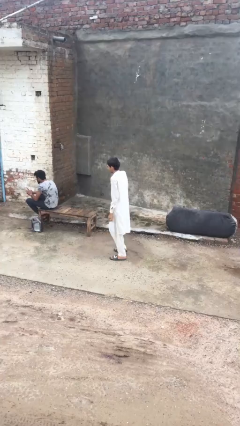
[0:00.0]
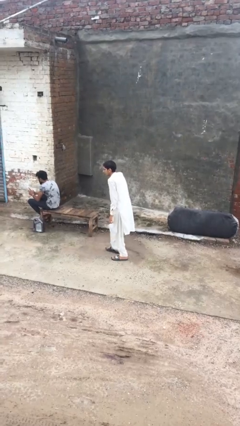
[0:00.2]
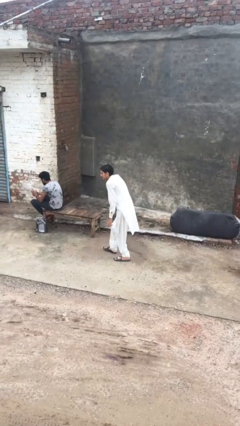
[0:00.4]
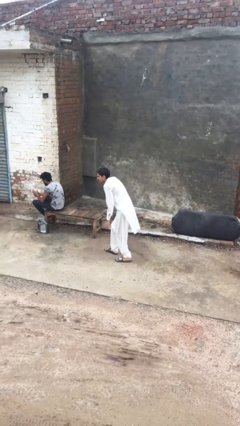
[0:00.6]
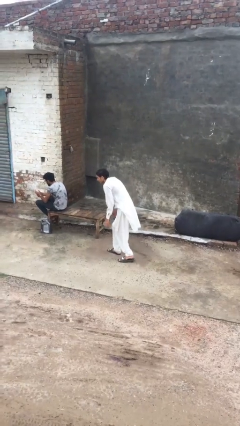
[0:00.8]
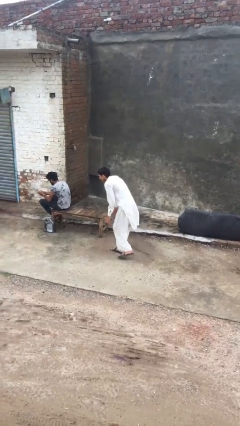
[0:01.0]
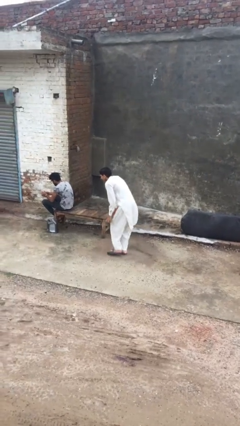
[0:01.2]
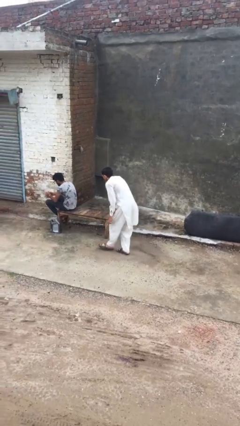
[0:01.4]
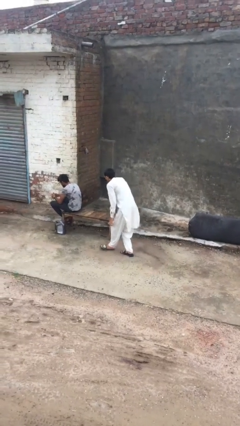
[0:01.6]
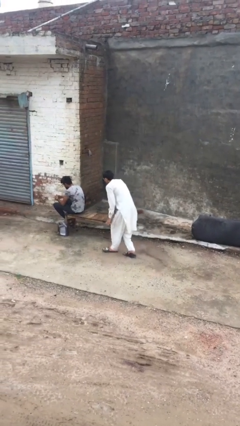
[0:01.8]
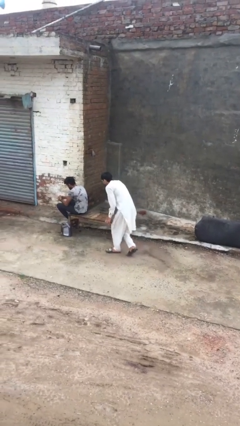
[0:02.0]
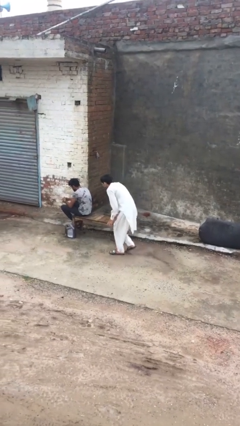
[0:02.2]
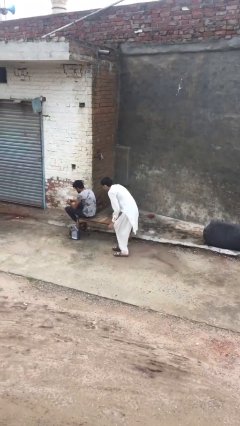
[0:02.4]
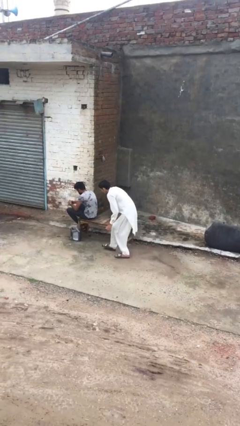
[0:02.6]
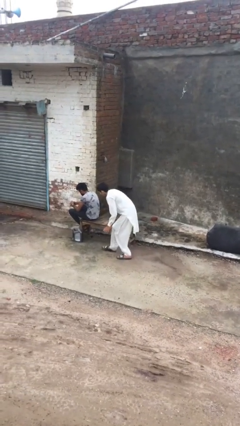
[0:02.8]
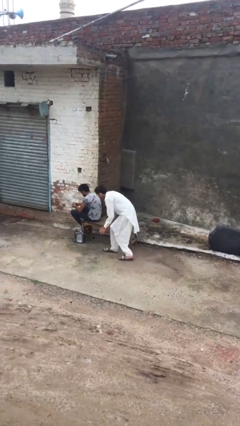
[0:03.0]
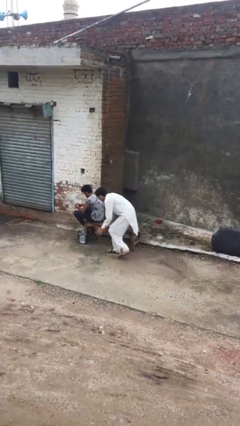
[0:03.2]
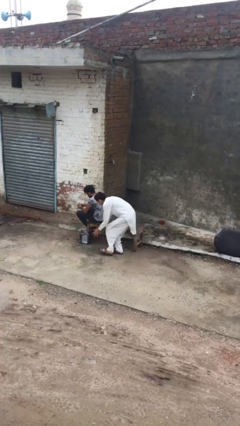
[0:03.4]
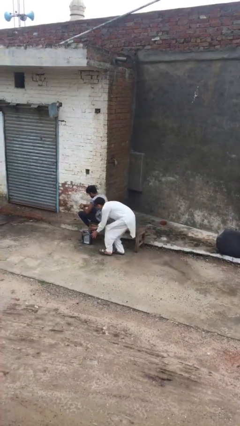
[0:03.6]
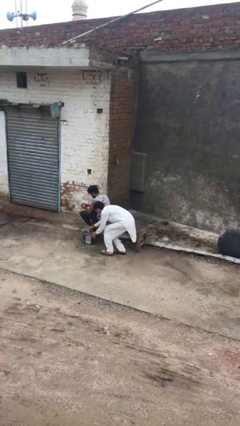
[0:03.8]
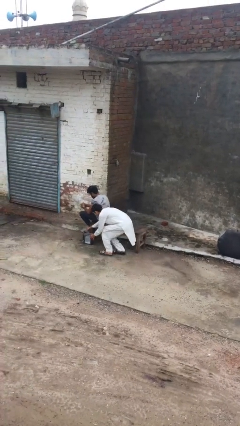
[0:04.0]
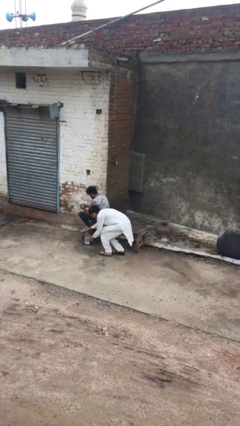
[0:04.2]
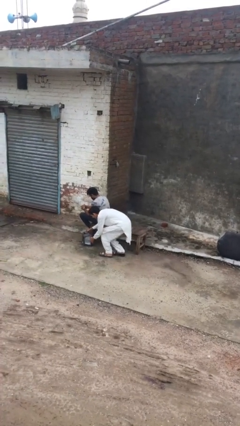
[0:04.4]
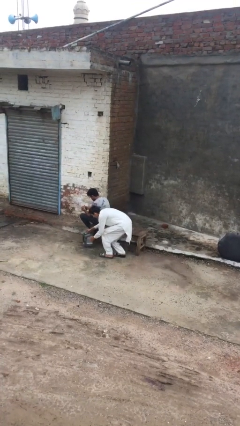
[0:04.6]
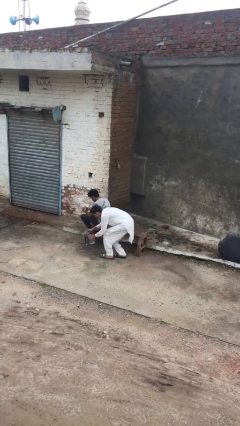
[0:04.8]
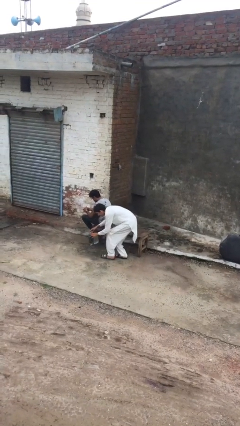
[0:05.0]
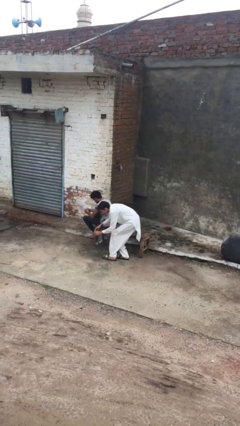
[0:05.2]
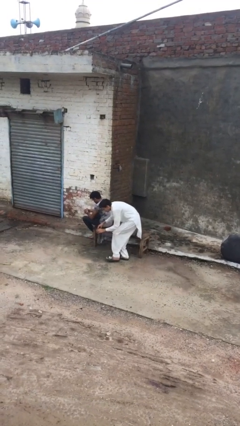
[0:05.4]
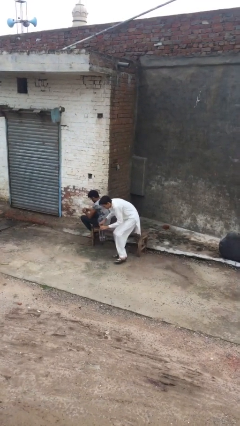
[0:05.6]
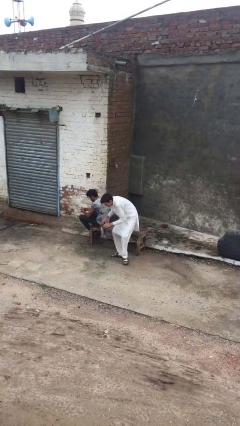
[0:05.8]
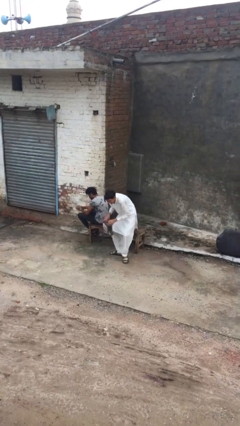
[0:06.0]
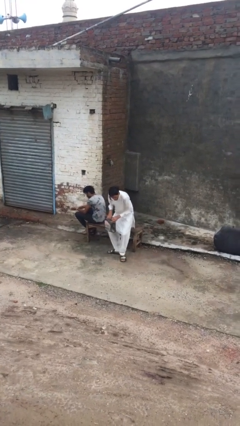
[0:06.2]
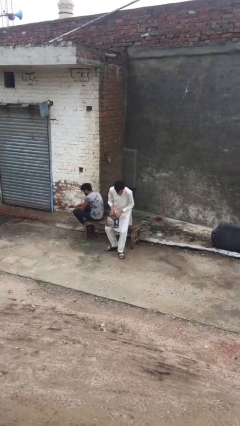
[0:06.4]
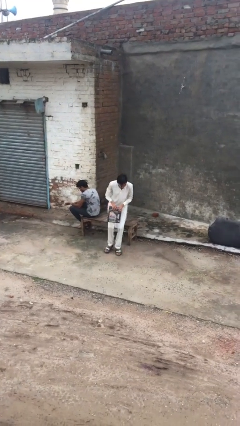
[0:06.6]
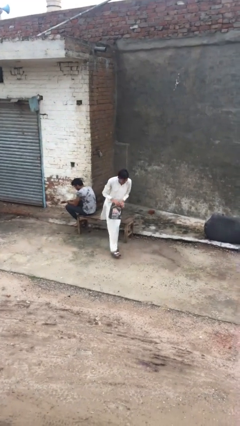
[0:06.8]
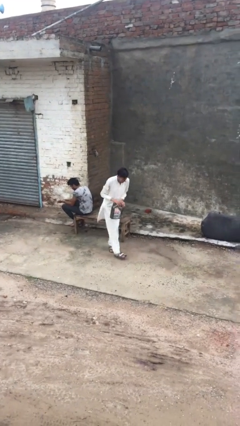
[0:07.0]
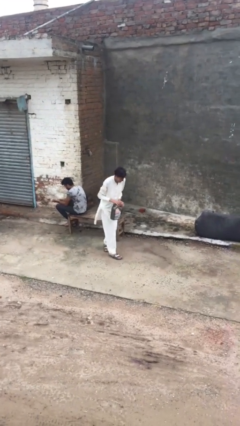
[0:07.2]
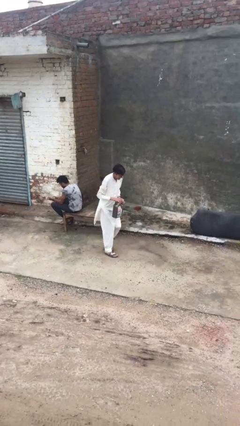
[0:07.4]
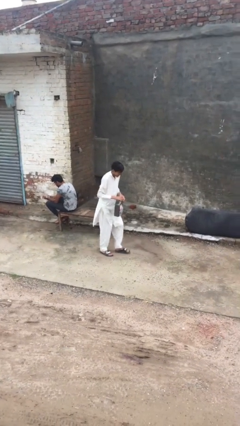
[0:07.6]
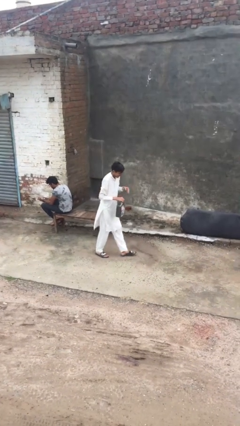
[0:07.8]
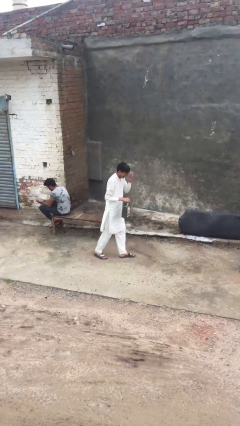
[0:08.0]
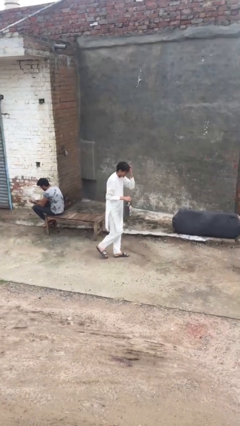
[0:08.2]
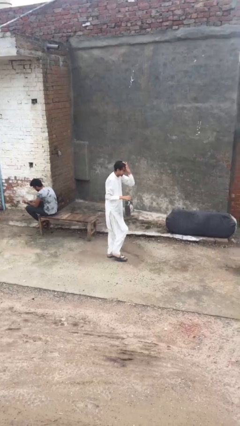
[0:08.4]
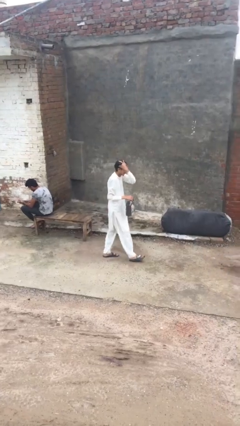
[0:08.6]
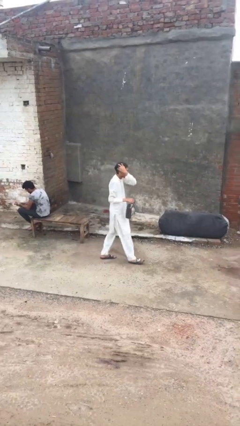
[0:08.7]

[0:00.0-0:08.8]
person steals object from person

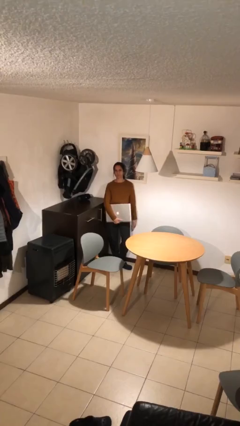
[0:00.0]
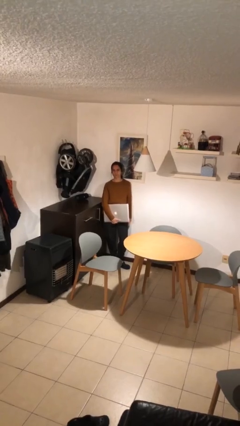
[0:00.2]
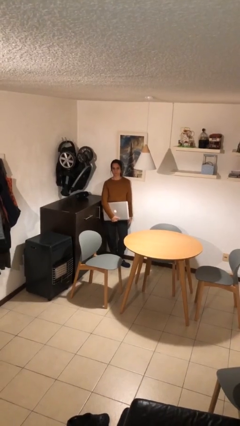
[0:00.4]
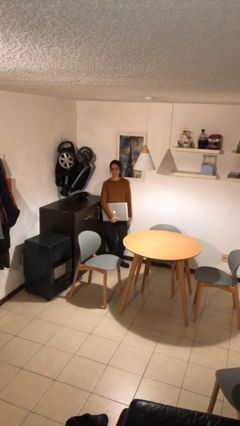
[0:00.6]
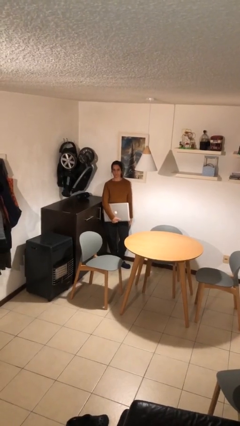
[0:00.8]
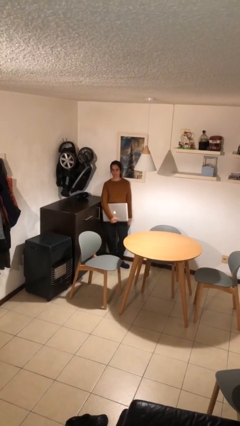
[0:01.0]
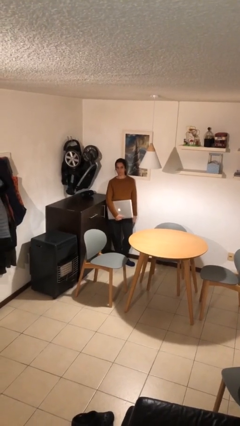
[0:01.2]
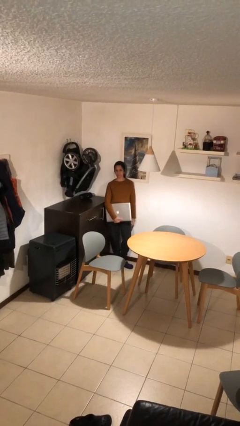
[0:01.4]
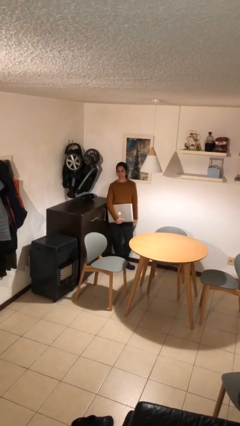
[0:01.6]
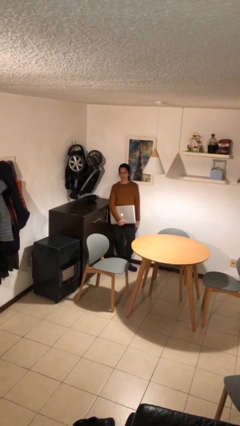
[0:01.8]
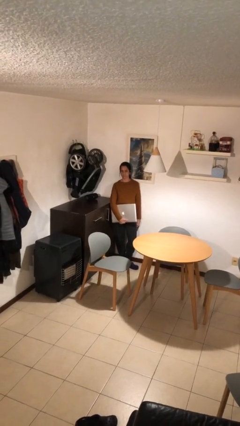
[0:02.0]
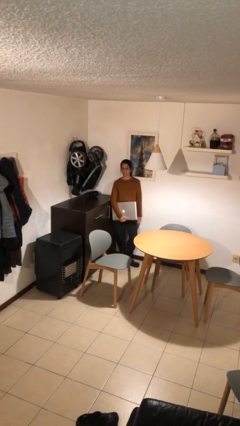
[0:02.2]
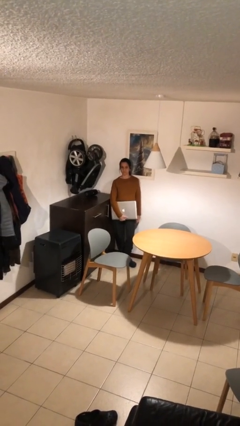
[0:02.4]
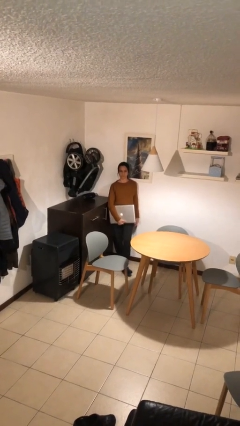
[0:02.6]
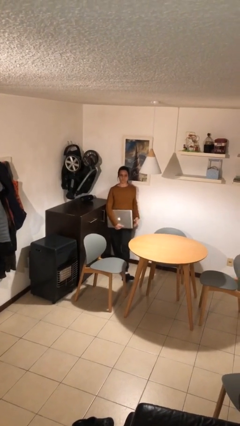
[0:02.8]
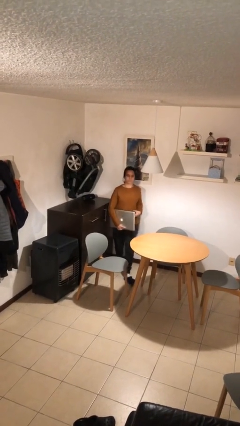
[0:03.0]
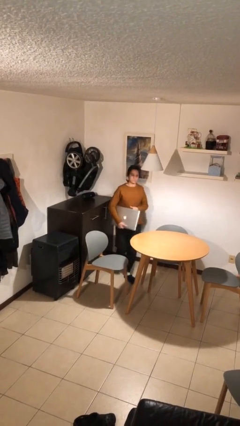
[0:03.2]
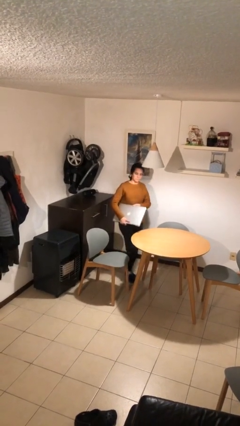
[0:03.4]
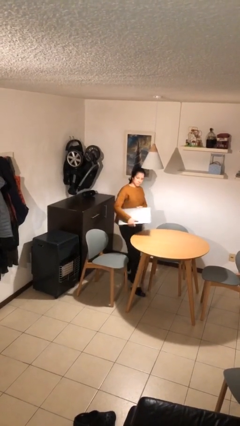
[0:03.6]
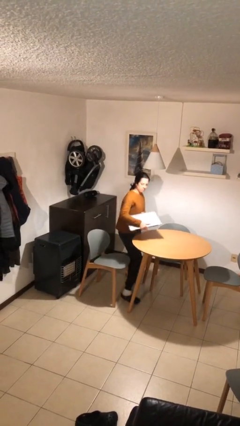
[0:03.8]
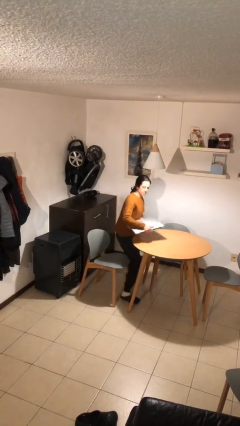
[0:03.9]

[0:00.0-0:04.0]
person stands up

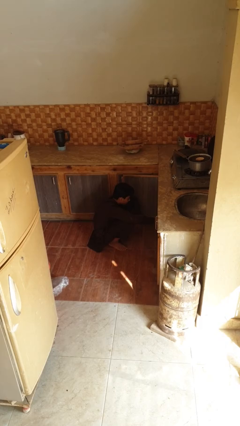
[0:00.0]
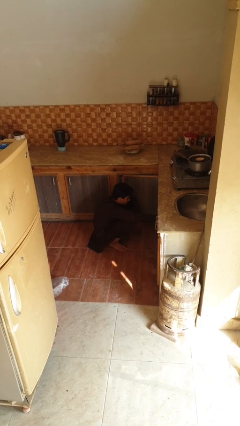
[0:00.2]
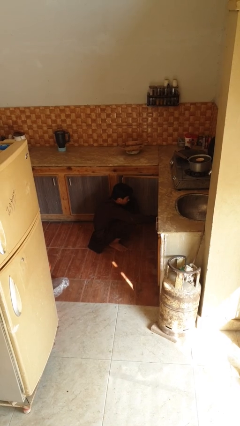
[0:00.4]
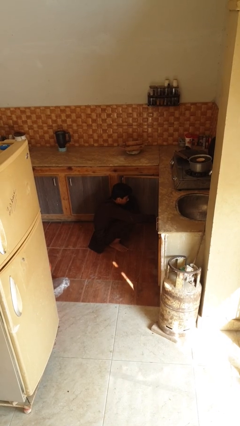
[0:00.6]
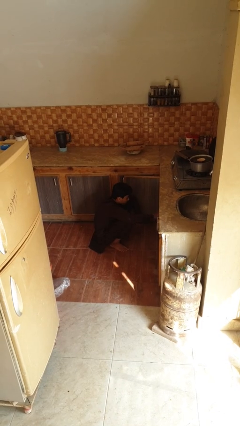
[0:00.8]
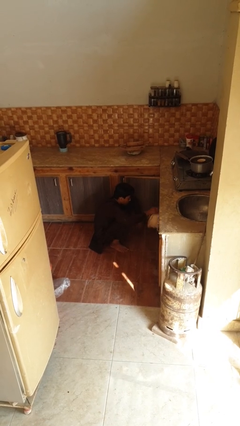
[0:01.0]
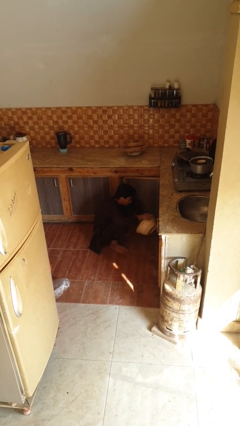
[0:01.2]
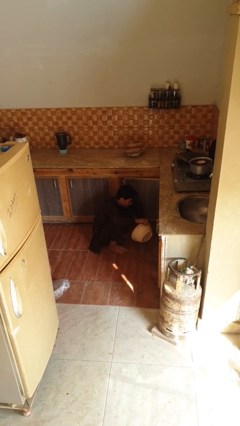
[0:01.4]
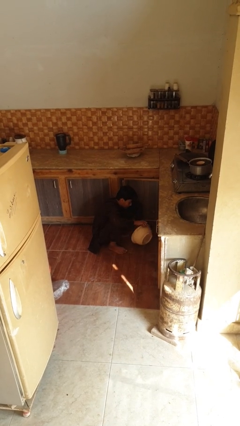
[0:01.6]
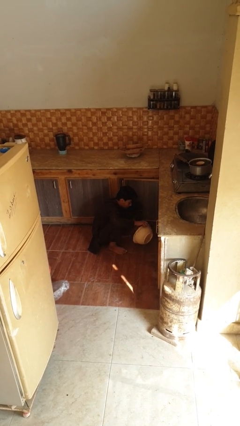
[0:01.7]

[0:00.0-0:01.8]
person takes object from kitchen drawer

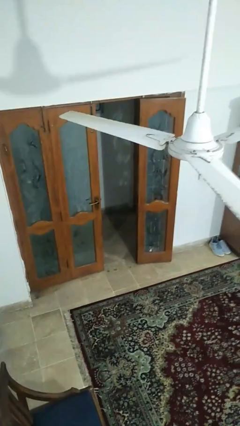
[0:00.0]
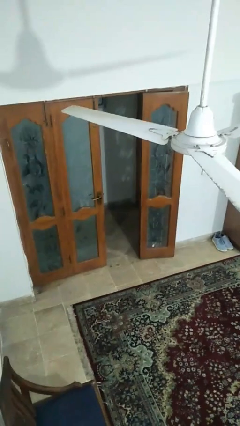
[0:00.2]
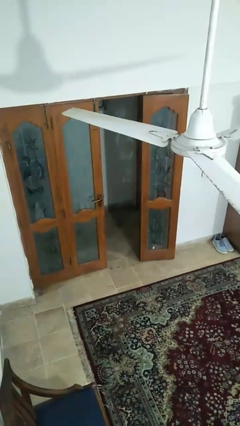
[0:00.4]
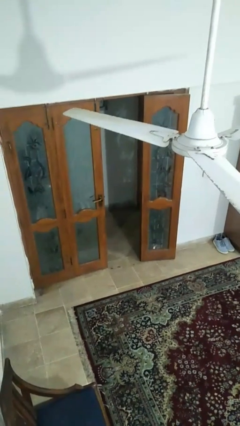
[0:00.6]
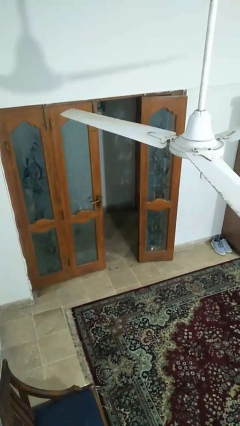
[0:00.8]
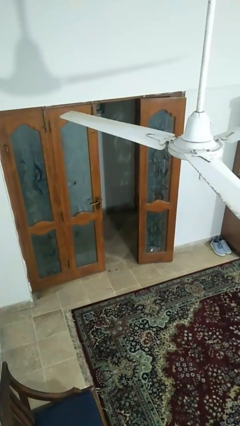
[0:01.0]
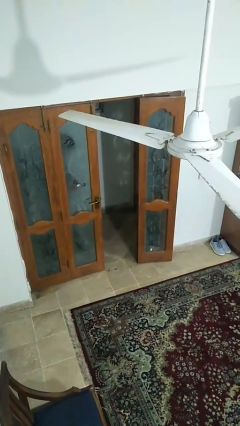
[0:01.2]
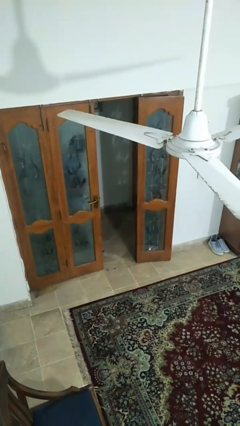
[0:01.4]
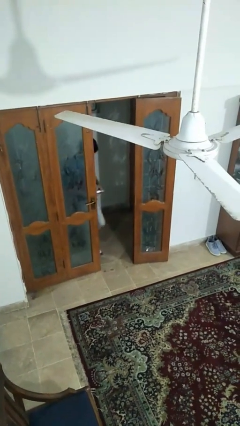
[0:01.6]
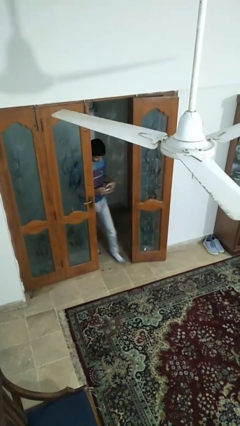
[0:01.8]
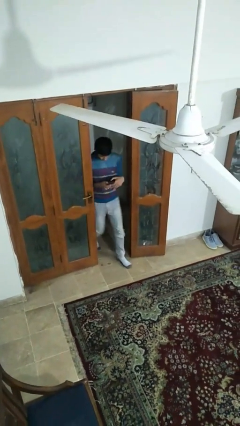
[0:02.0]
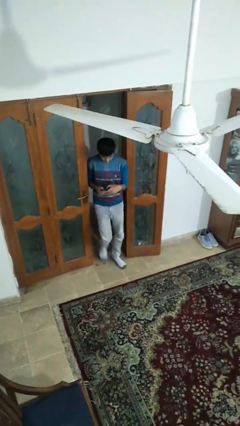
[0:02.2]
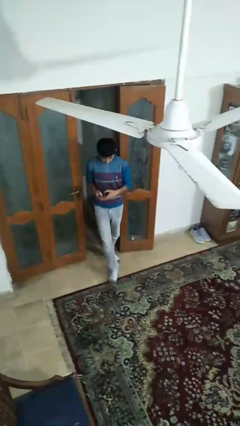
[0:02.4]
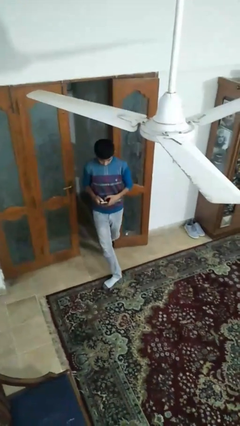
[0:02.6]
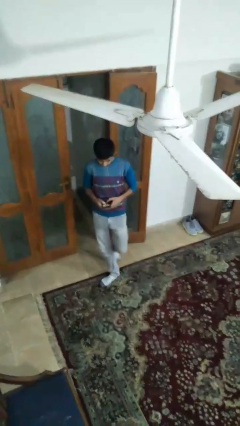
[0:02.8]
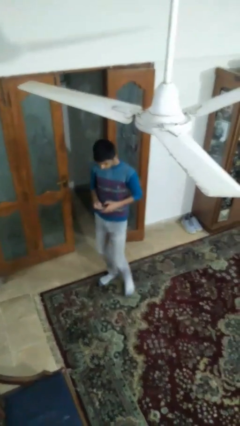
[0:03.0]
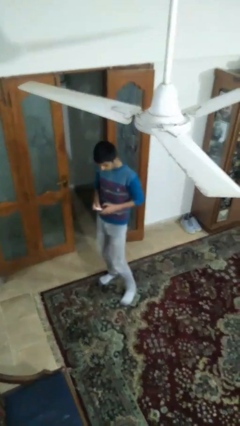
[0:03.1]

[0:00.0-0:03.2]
person opens facility door
